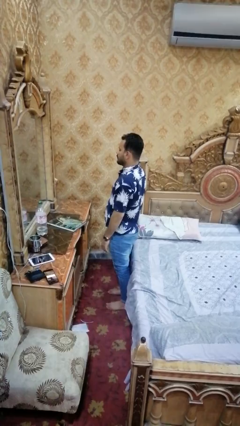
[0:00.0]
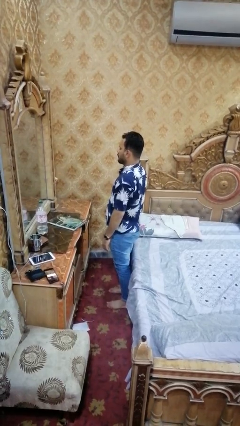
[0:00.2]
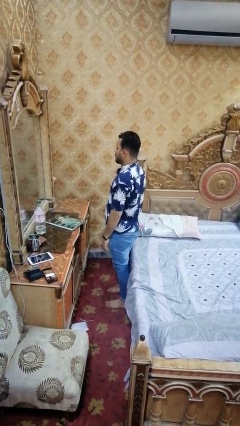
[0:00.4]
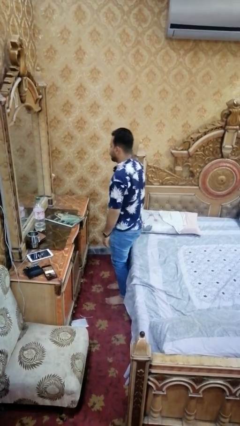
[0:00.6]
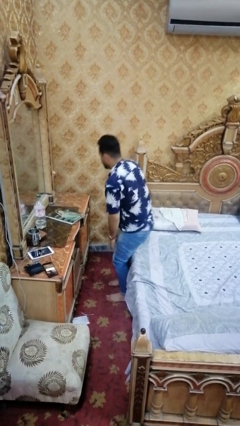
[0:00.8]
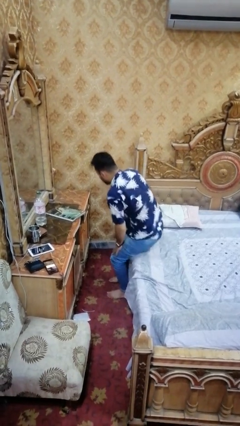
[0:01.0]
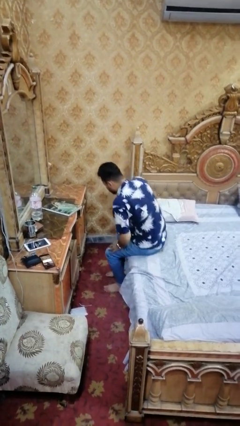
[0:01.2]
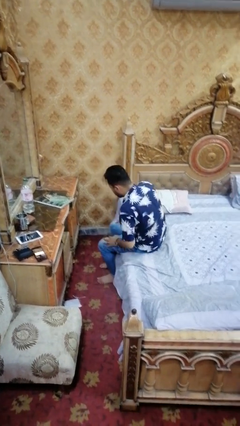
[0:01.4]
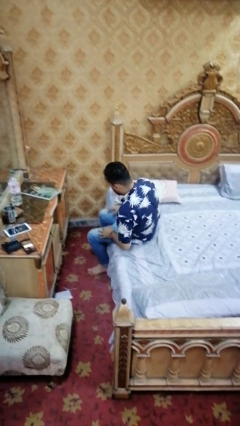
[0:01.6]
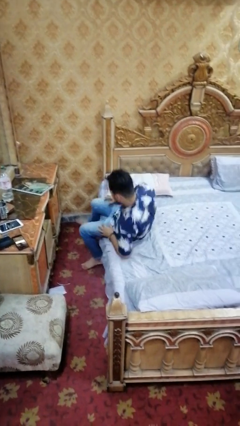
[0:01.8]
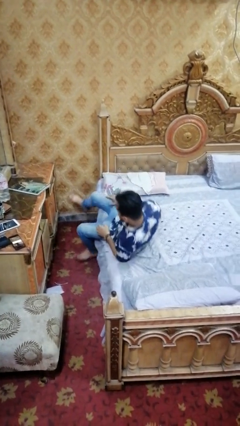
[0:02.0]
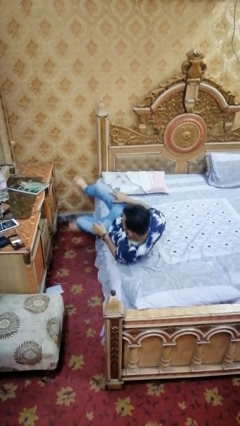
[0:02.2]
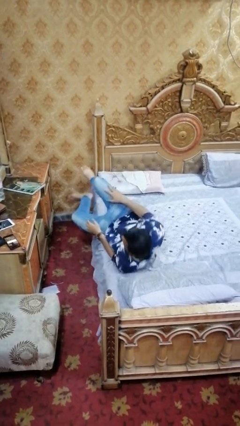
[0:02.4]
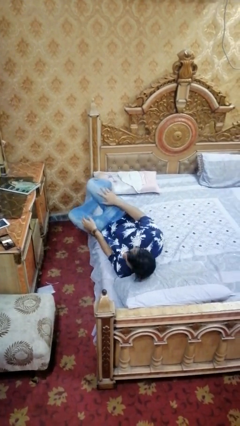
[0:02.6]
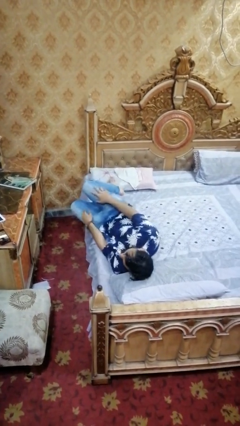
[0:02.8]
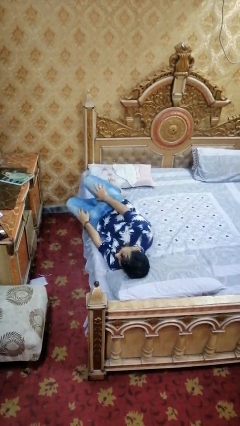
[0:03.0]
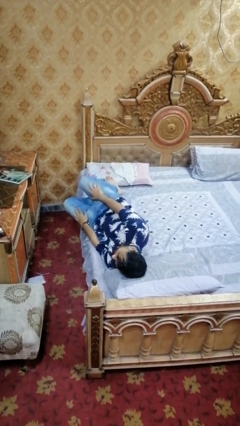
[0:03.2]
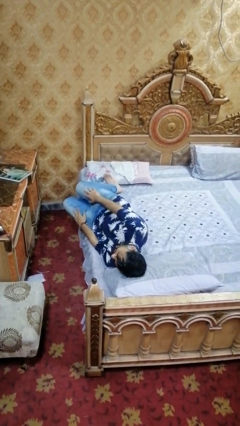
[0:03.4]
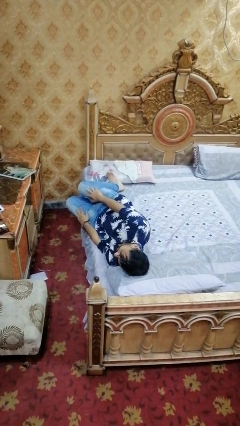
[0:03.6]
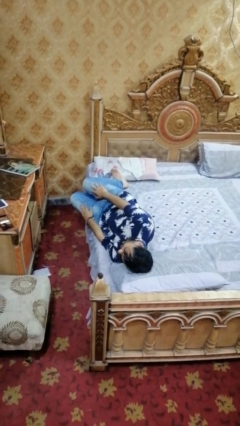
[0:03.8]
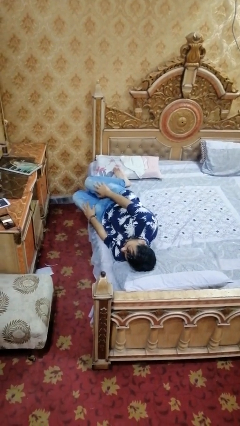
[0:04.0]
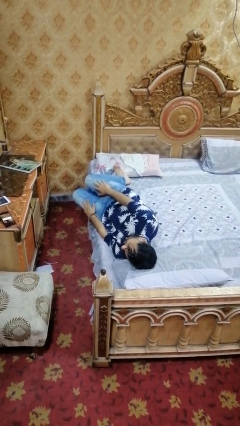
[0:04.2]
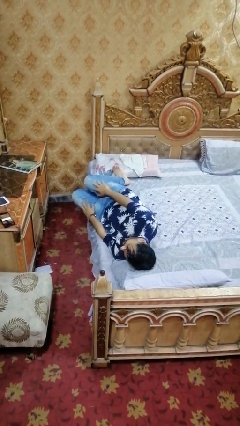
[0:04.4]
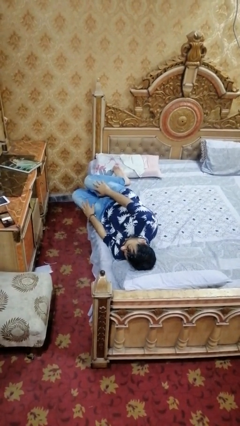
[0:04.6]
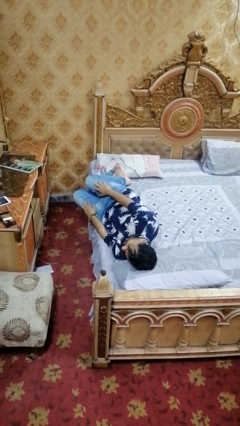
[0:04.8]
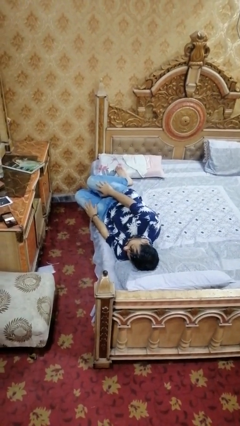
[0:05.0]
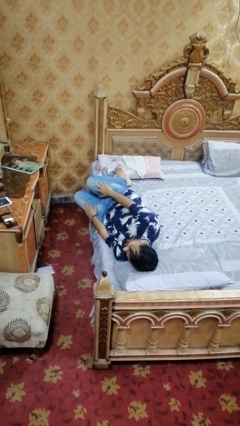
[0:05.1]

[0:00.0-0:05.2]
person lies down on bed

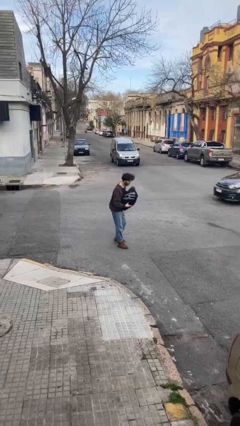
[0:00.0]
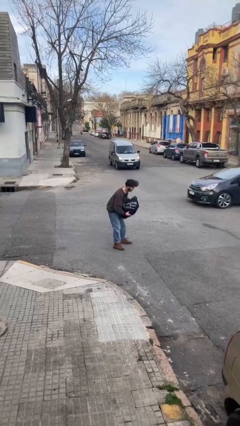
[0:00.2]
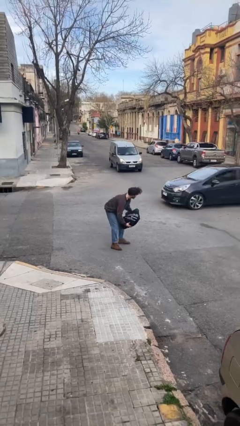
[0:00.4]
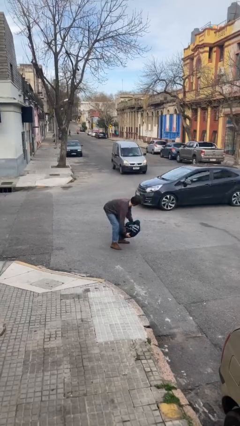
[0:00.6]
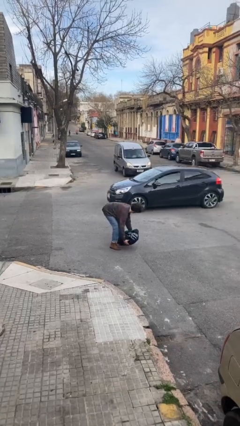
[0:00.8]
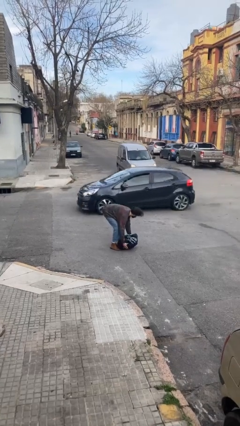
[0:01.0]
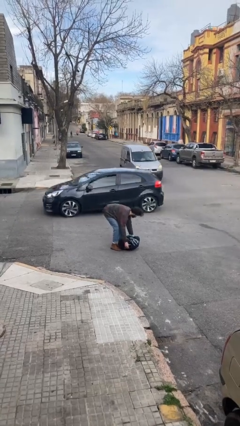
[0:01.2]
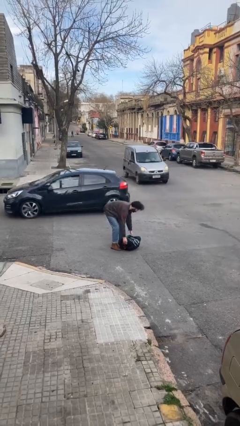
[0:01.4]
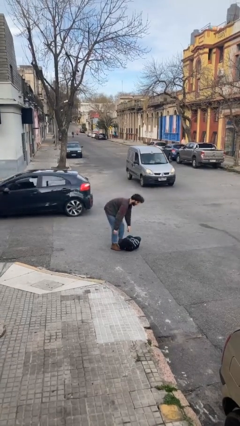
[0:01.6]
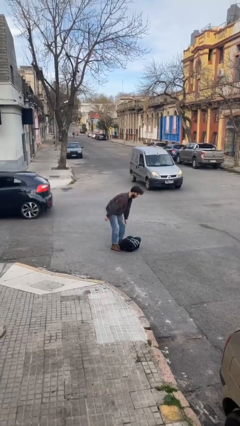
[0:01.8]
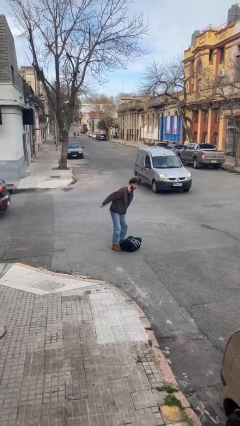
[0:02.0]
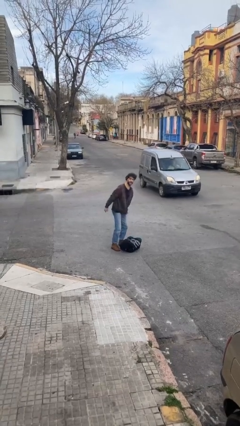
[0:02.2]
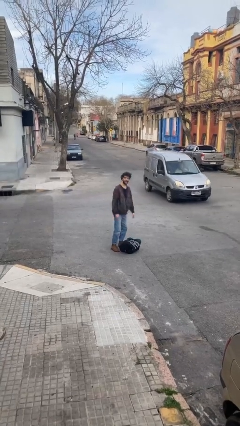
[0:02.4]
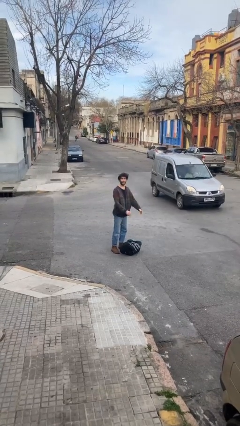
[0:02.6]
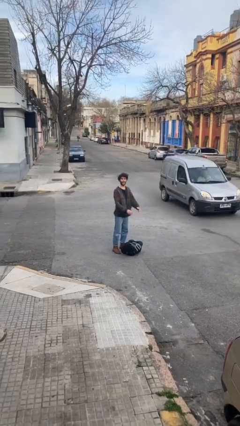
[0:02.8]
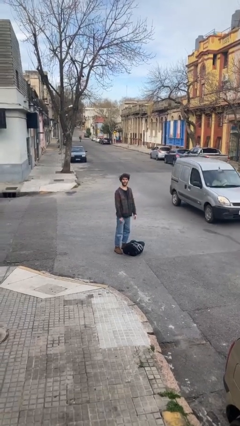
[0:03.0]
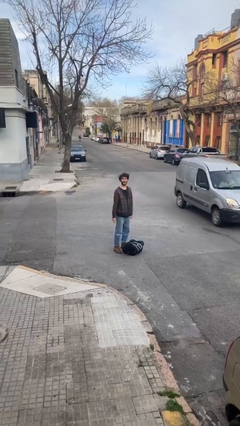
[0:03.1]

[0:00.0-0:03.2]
person puts down object on floor

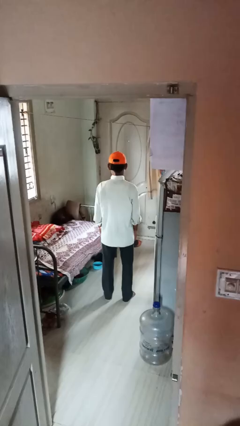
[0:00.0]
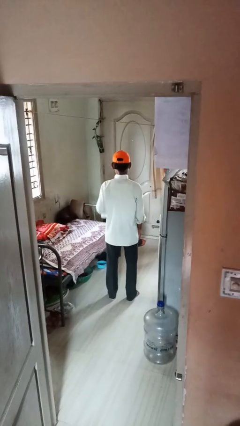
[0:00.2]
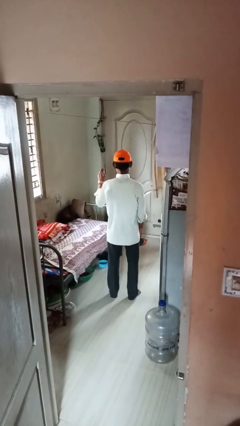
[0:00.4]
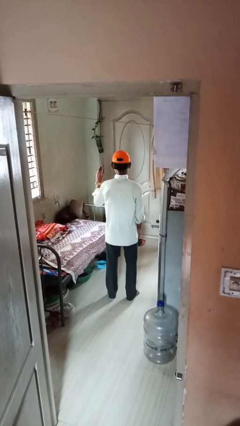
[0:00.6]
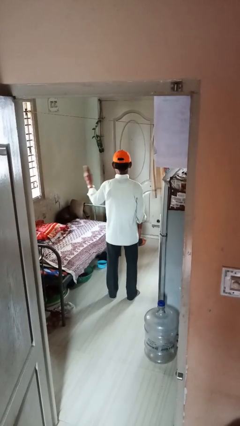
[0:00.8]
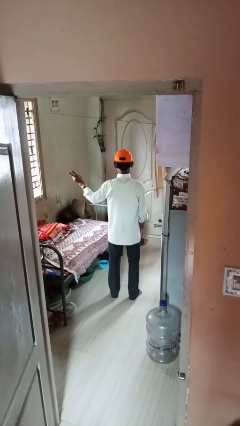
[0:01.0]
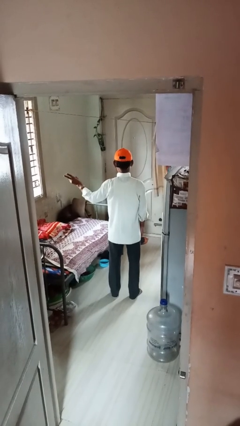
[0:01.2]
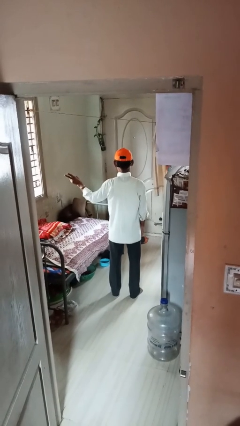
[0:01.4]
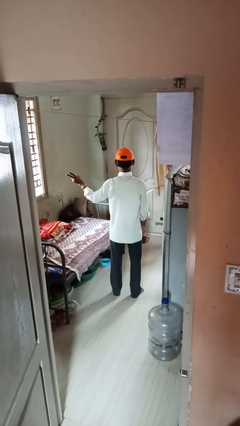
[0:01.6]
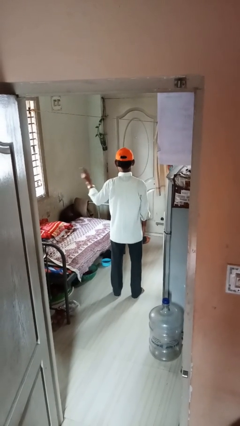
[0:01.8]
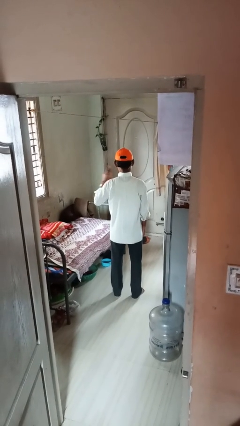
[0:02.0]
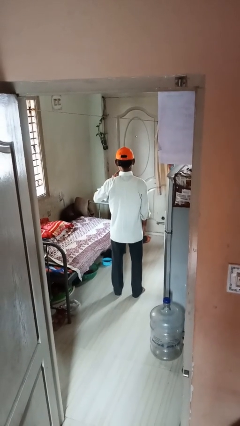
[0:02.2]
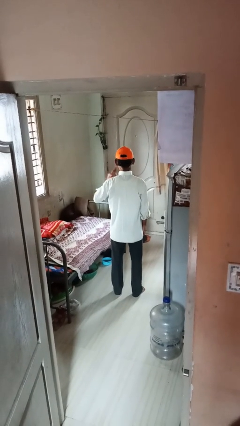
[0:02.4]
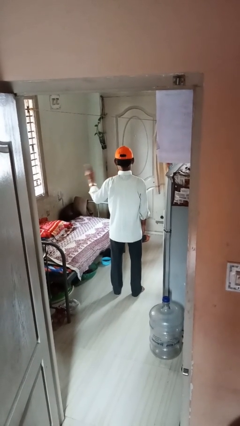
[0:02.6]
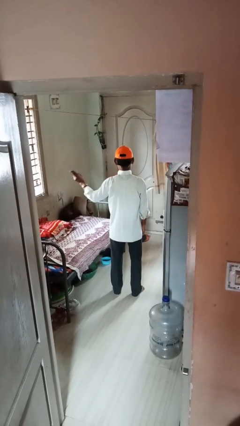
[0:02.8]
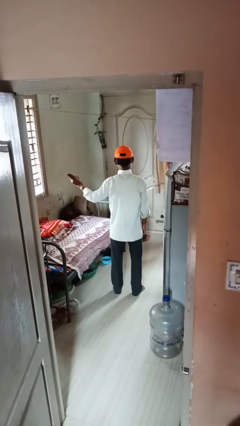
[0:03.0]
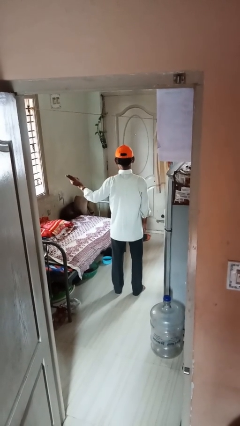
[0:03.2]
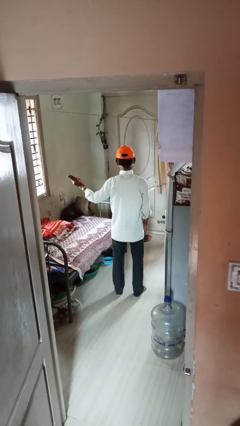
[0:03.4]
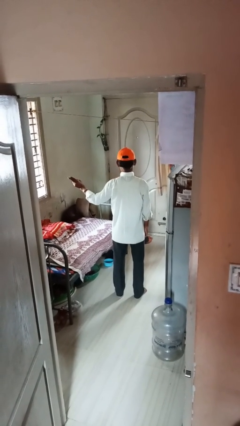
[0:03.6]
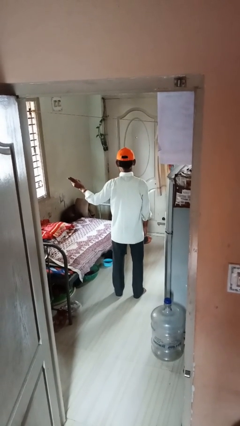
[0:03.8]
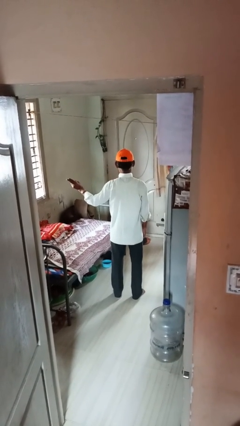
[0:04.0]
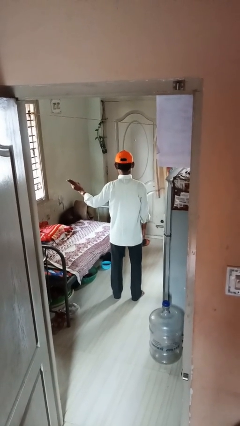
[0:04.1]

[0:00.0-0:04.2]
person gestures swipe left

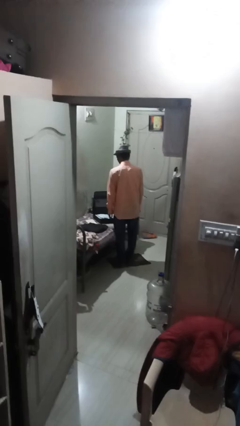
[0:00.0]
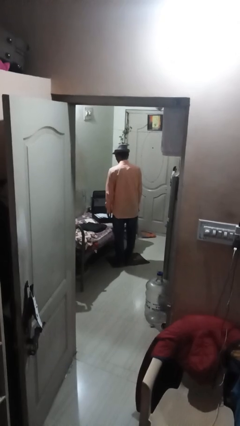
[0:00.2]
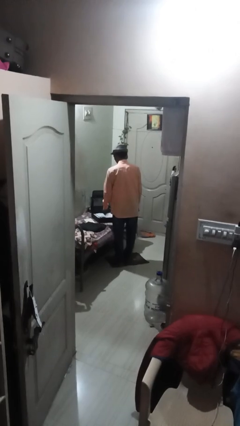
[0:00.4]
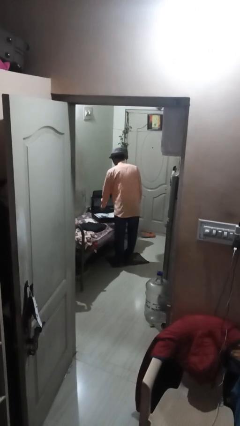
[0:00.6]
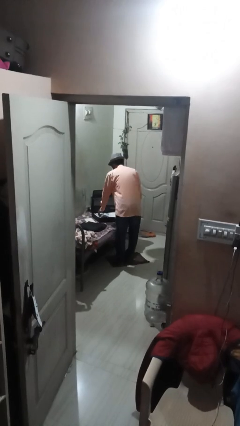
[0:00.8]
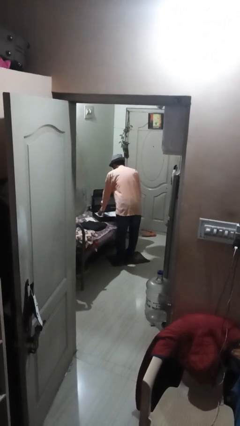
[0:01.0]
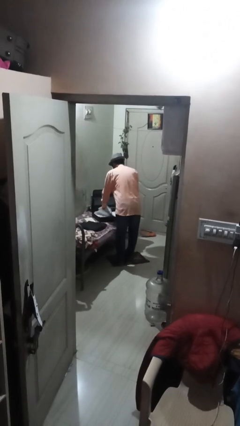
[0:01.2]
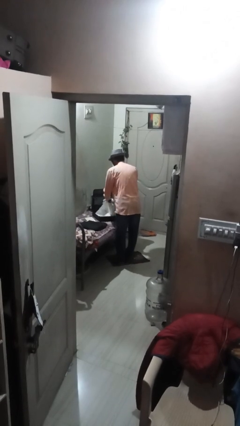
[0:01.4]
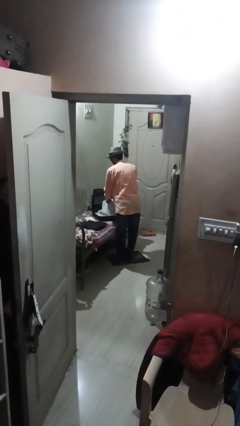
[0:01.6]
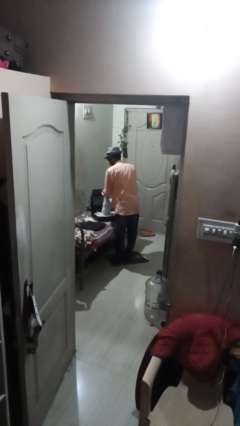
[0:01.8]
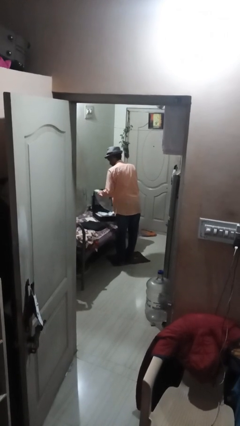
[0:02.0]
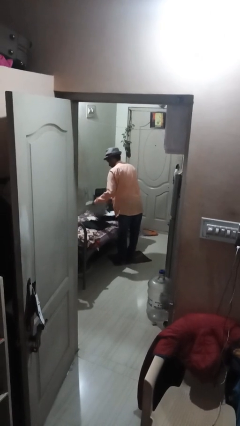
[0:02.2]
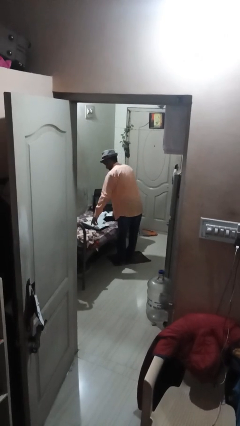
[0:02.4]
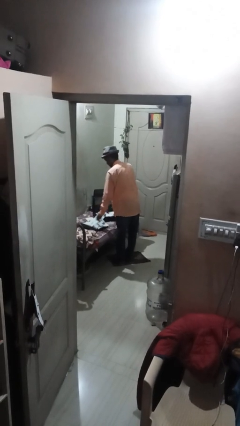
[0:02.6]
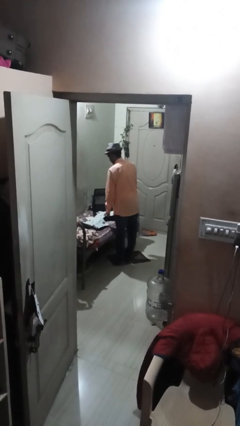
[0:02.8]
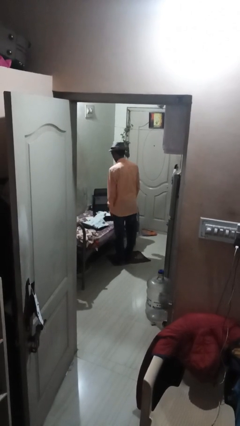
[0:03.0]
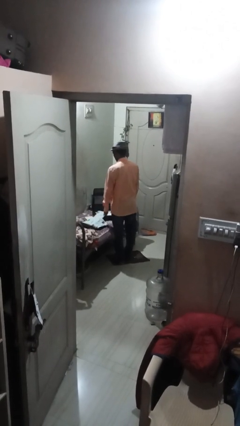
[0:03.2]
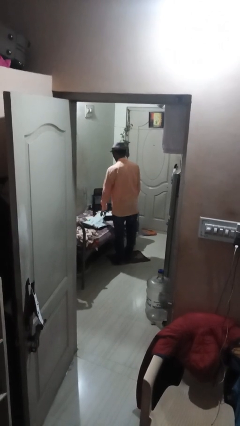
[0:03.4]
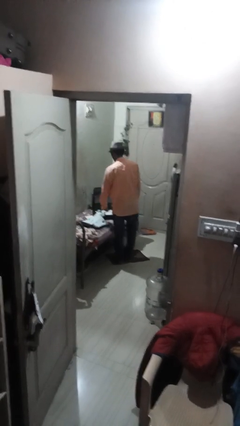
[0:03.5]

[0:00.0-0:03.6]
person unloads clothes from suitcase

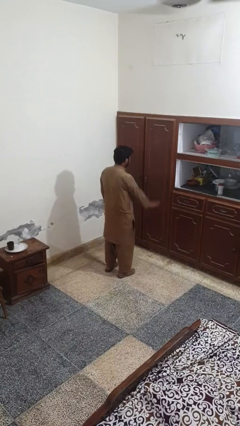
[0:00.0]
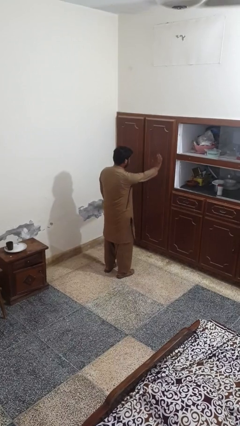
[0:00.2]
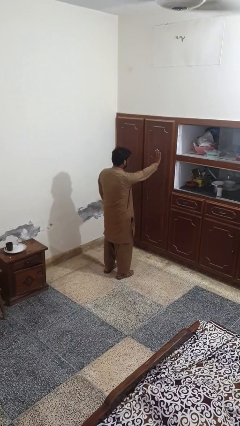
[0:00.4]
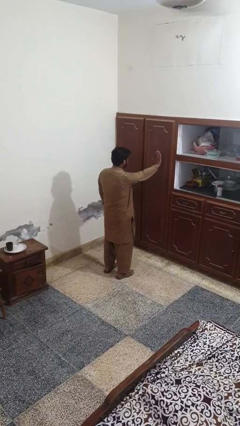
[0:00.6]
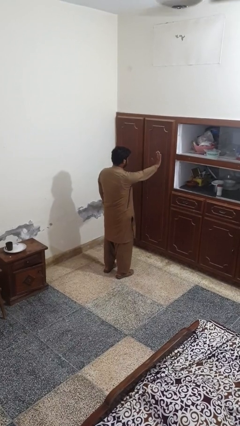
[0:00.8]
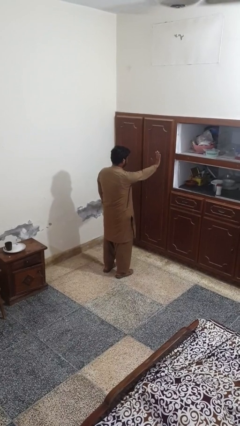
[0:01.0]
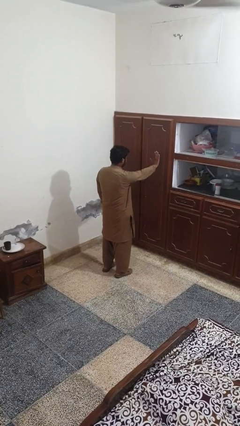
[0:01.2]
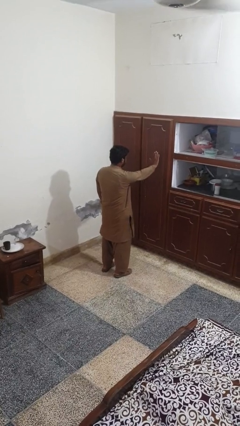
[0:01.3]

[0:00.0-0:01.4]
person gestures stop

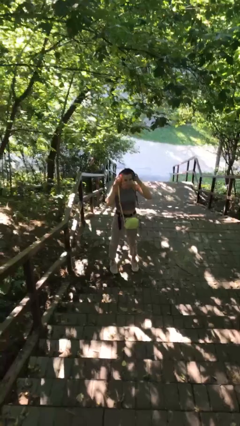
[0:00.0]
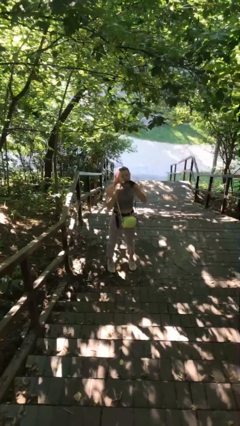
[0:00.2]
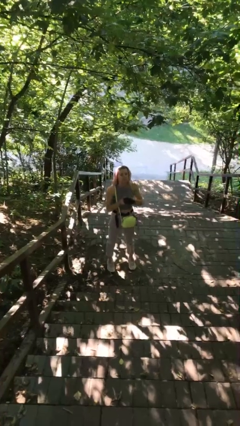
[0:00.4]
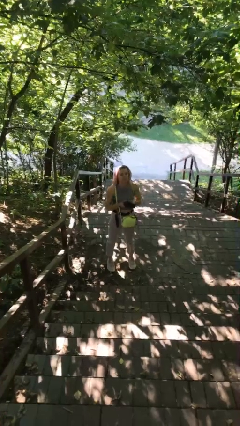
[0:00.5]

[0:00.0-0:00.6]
person takes off headphones
